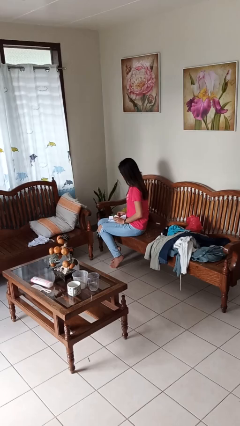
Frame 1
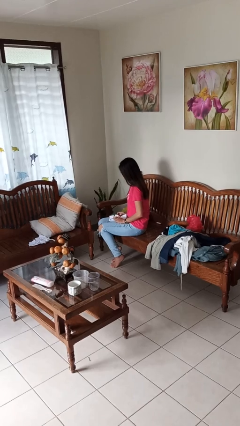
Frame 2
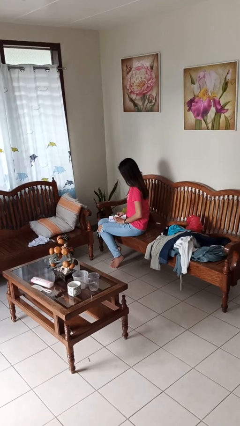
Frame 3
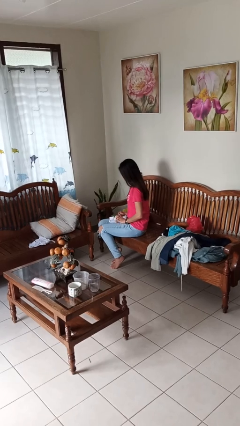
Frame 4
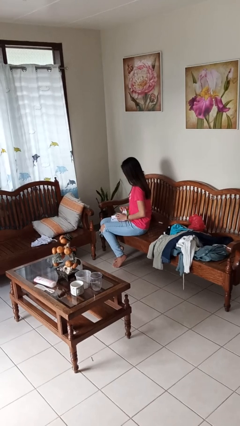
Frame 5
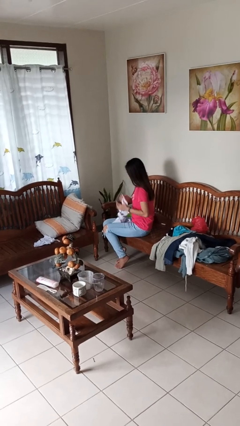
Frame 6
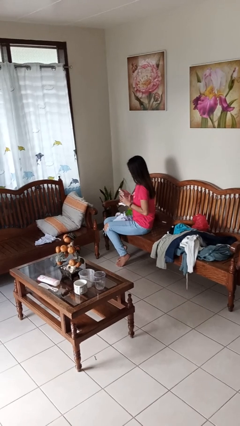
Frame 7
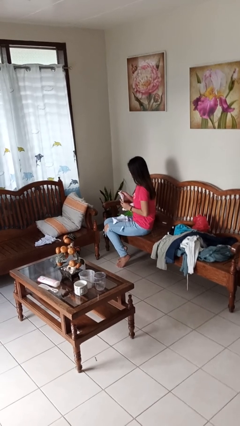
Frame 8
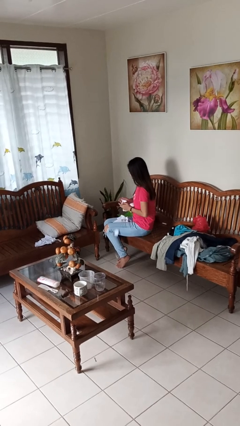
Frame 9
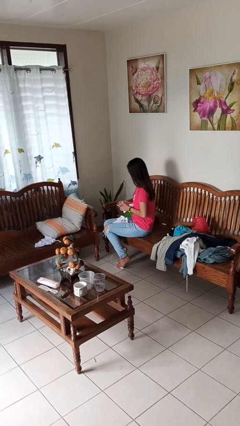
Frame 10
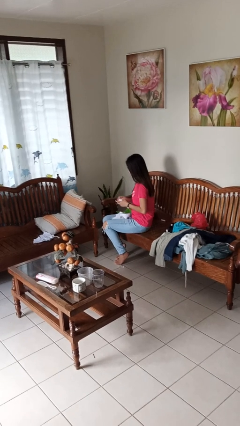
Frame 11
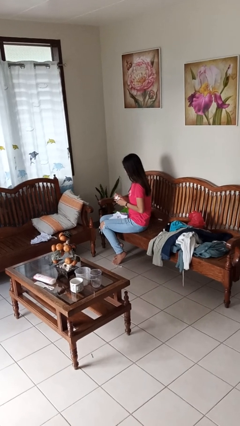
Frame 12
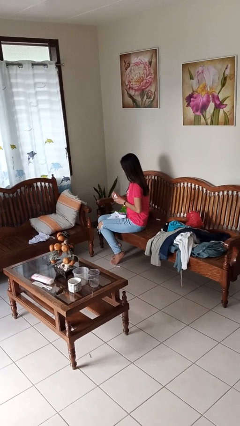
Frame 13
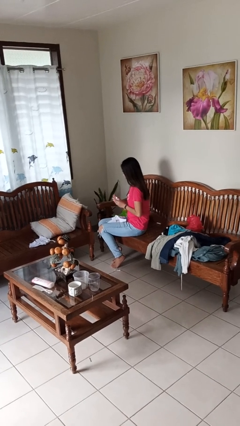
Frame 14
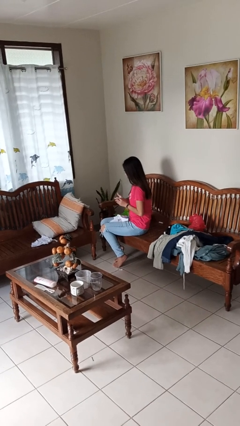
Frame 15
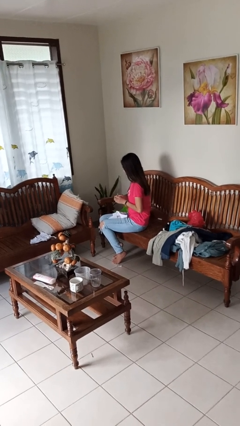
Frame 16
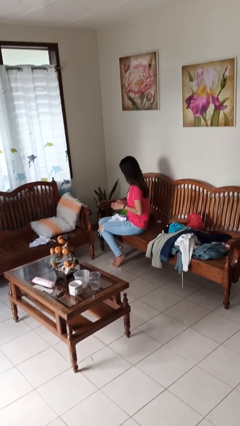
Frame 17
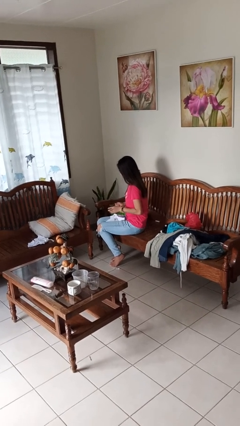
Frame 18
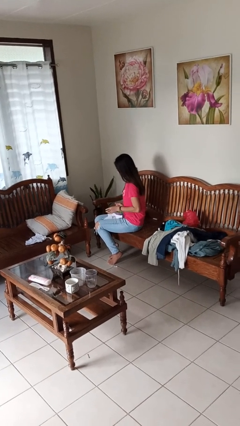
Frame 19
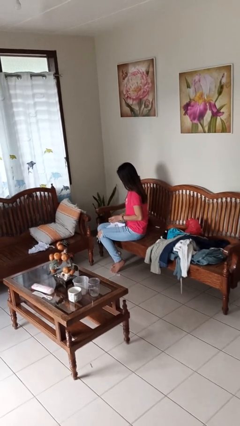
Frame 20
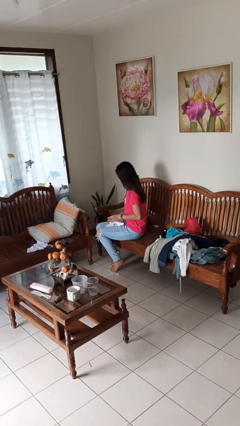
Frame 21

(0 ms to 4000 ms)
person crumples paper

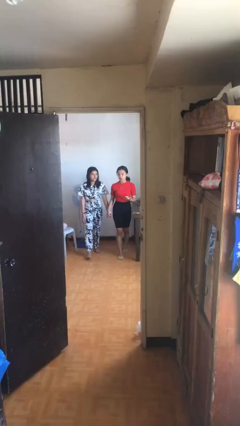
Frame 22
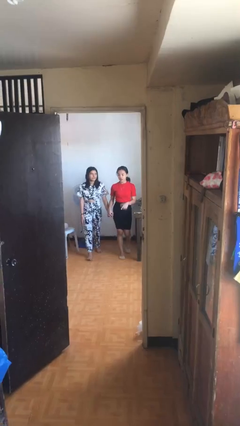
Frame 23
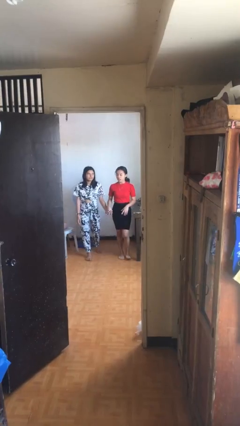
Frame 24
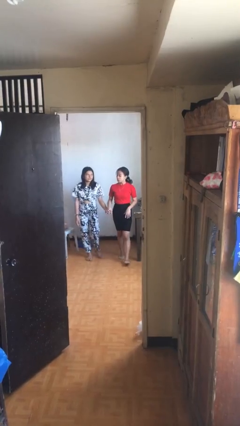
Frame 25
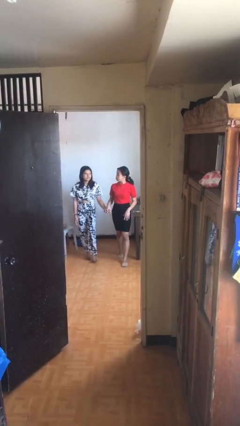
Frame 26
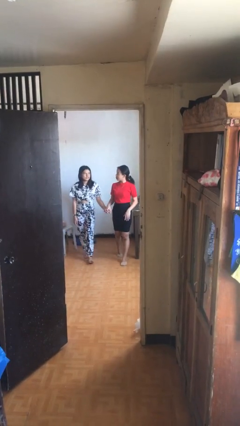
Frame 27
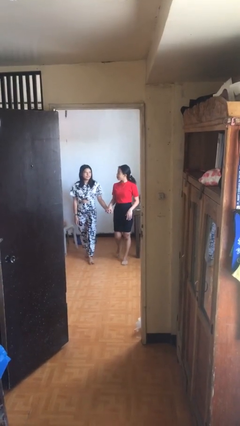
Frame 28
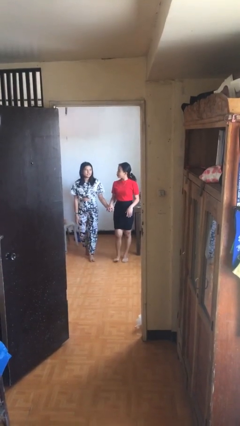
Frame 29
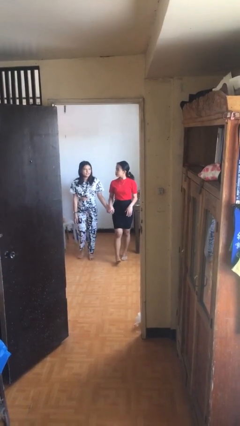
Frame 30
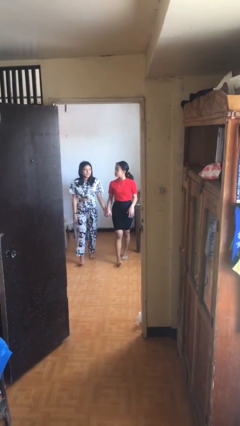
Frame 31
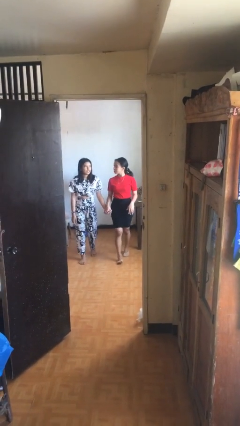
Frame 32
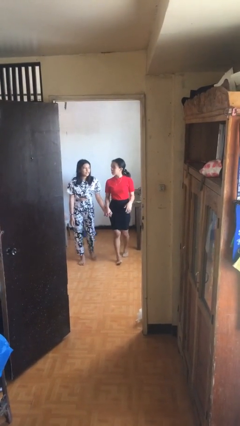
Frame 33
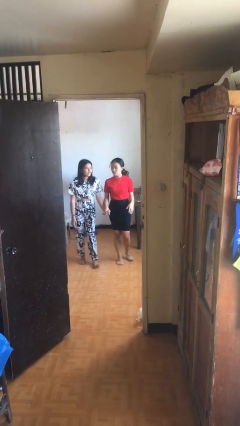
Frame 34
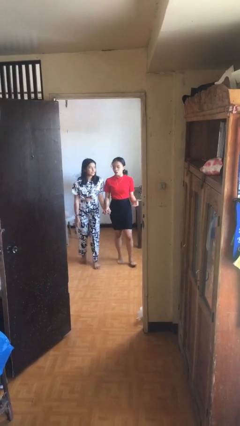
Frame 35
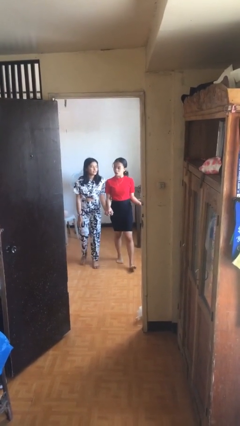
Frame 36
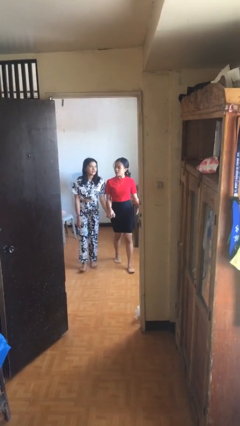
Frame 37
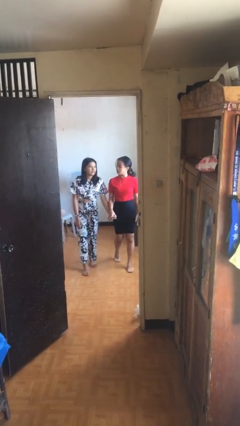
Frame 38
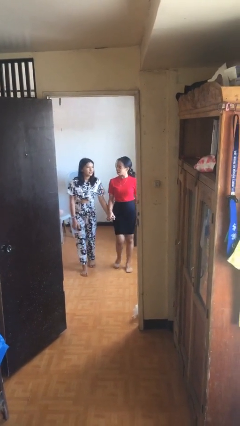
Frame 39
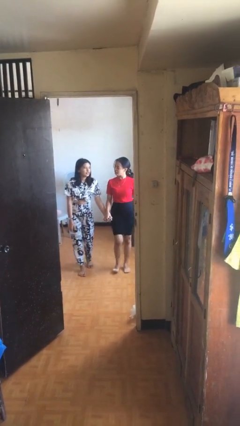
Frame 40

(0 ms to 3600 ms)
person holds hand

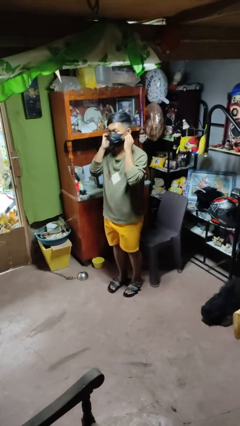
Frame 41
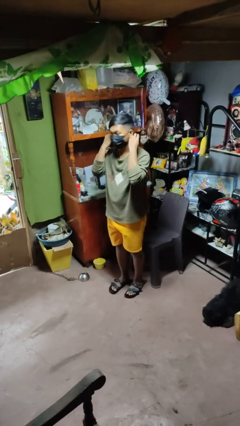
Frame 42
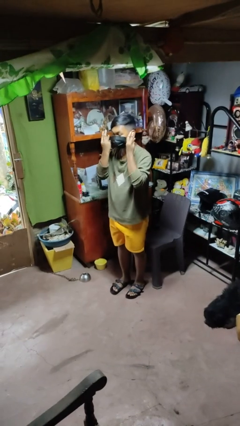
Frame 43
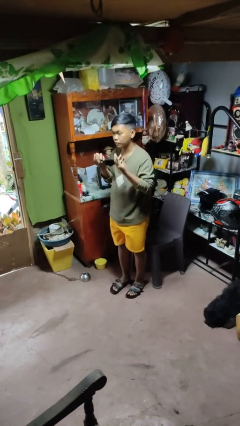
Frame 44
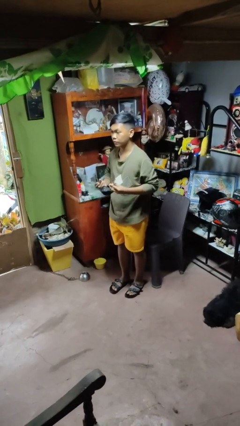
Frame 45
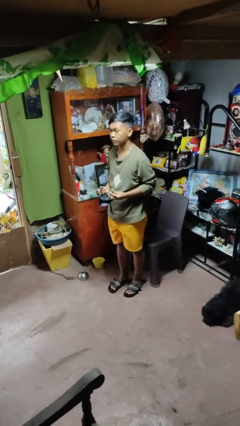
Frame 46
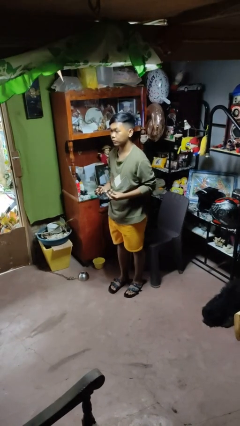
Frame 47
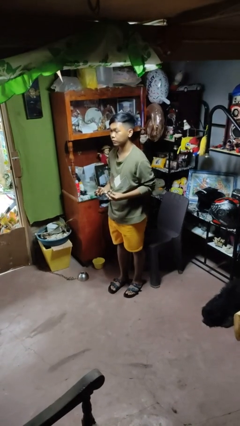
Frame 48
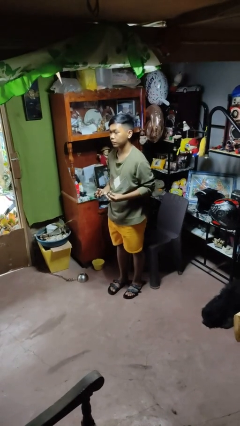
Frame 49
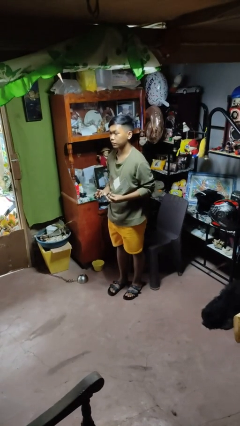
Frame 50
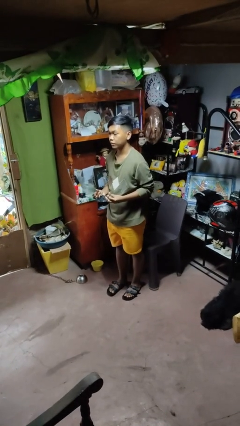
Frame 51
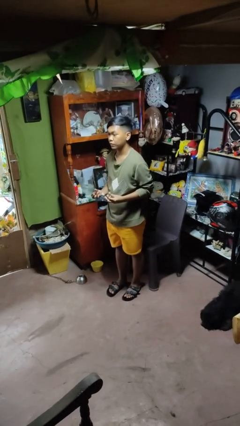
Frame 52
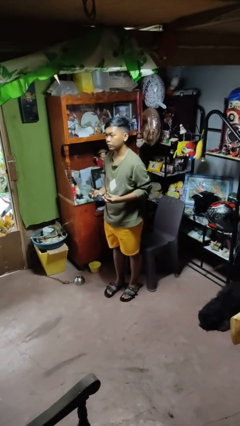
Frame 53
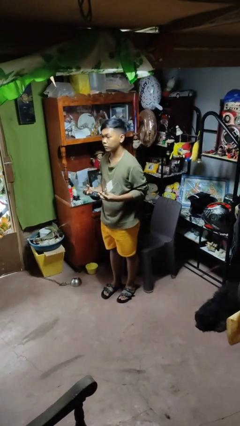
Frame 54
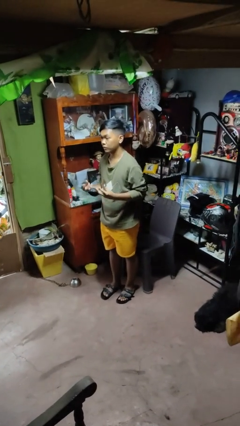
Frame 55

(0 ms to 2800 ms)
person takes off facemask

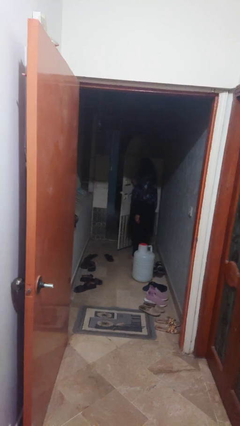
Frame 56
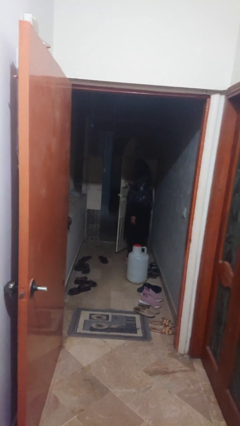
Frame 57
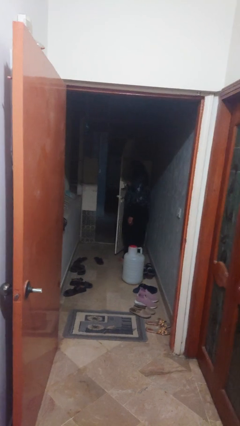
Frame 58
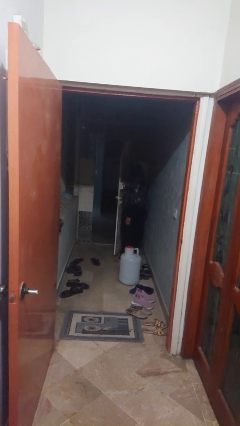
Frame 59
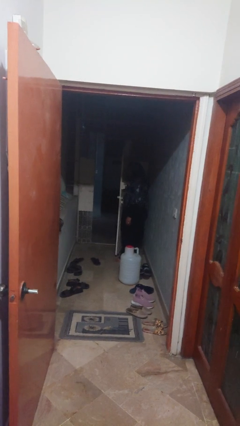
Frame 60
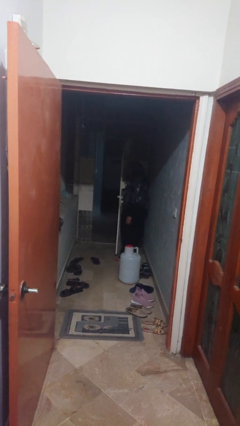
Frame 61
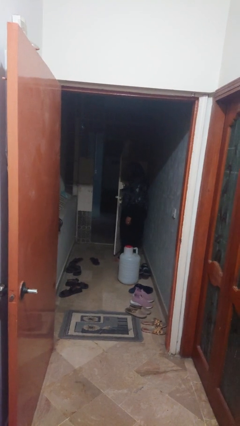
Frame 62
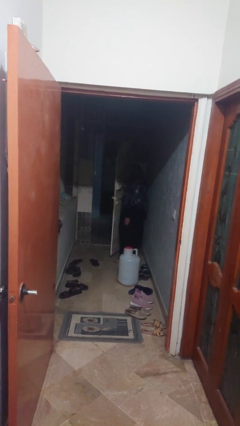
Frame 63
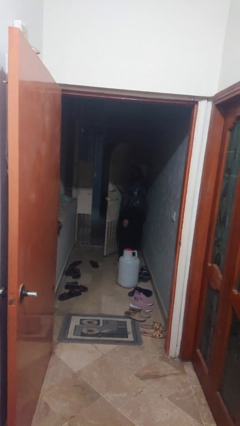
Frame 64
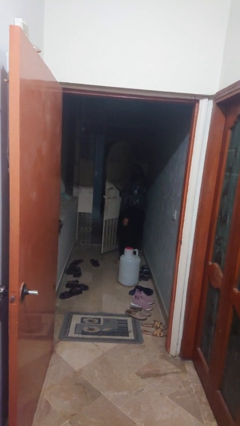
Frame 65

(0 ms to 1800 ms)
person opens gate

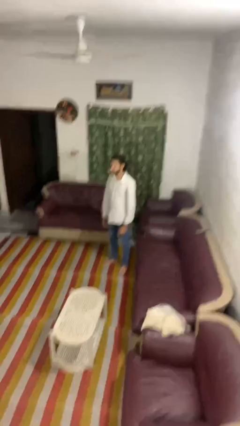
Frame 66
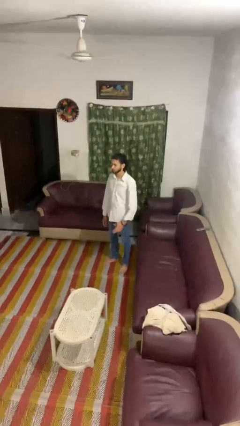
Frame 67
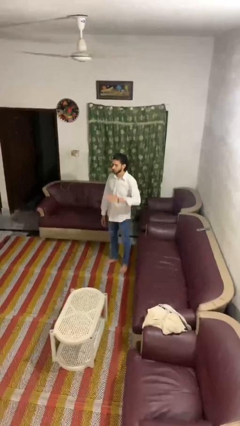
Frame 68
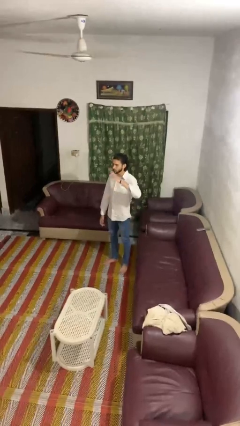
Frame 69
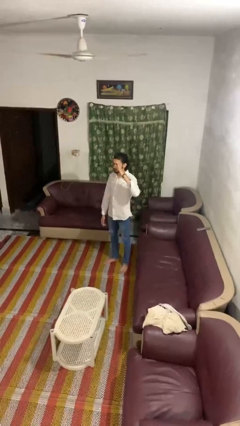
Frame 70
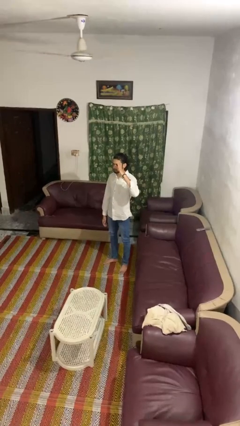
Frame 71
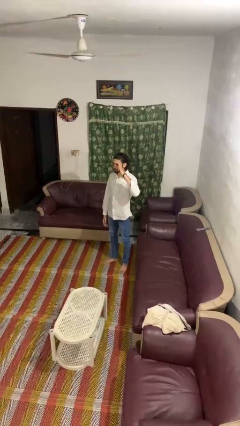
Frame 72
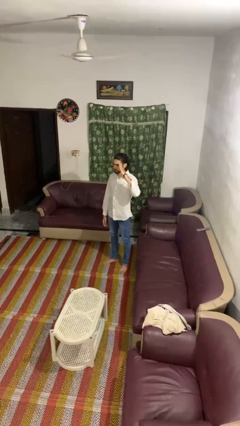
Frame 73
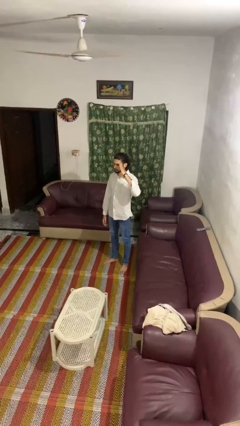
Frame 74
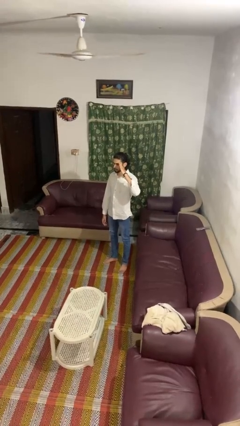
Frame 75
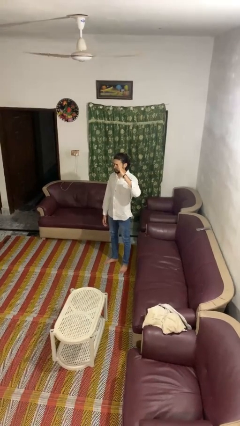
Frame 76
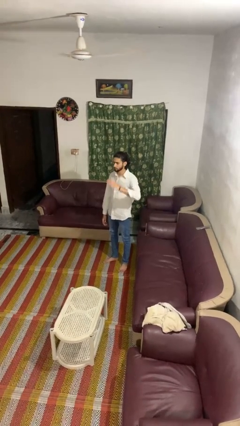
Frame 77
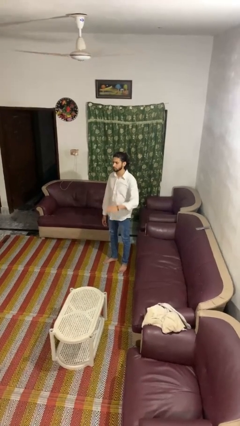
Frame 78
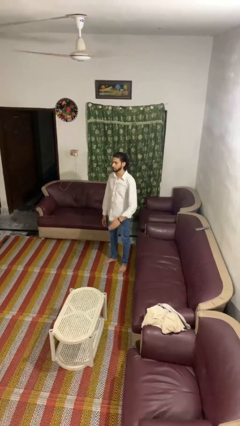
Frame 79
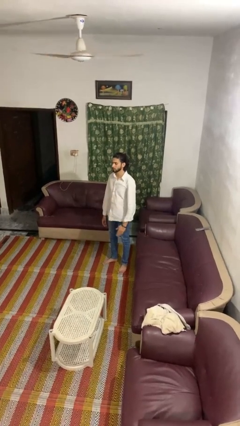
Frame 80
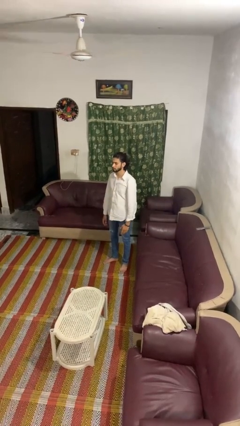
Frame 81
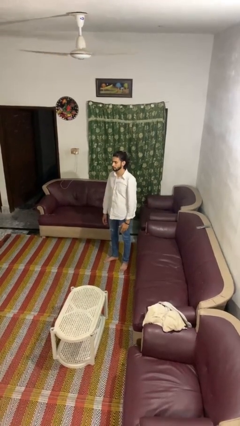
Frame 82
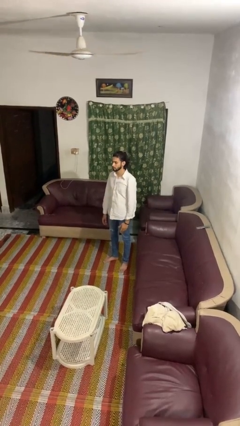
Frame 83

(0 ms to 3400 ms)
person salutes

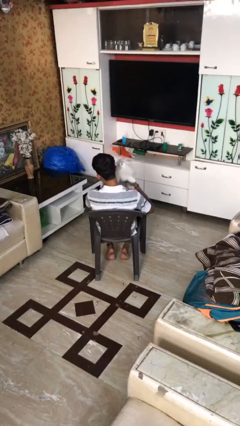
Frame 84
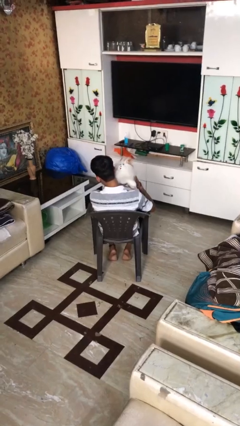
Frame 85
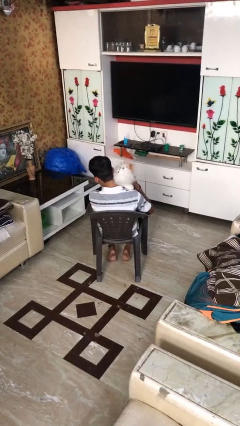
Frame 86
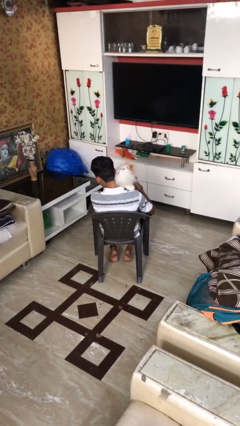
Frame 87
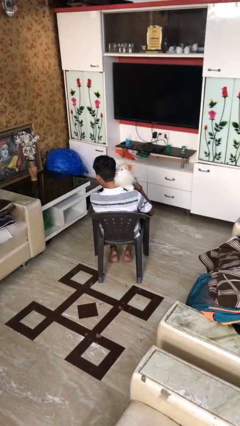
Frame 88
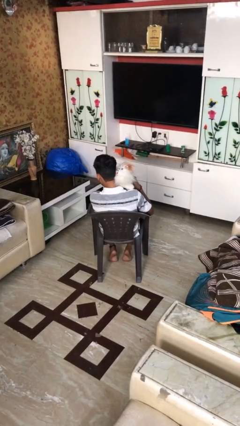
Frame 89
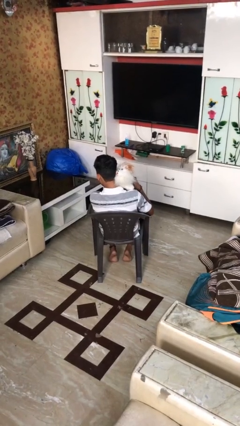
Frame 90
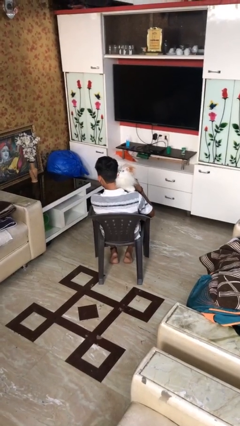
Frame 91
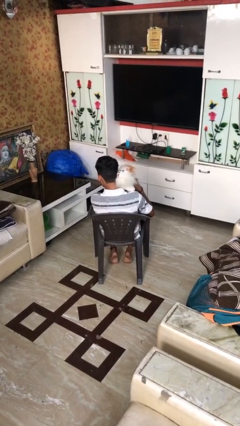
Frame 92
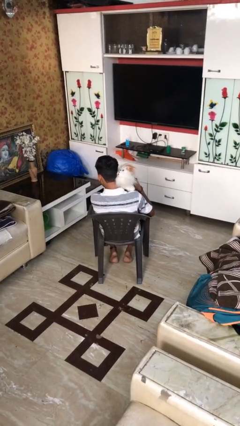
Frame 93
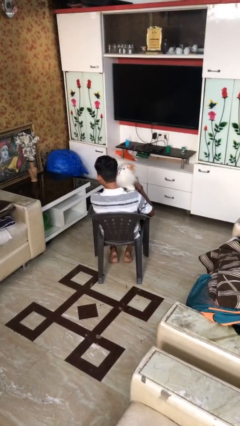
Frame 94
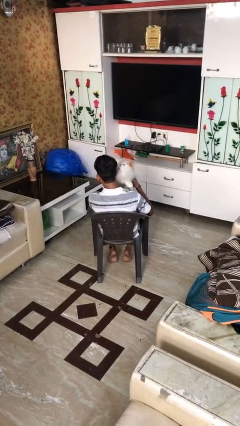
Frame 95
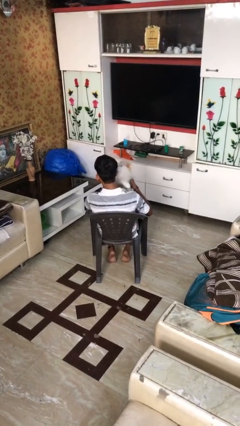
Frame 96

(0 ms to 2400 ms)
person hugs stuffed animal
